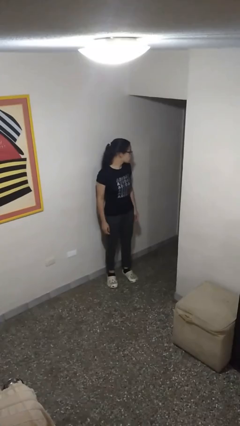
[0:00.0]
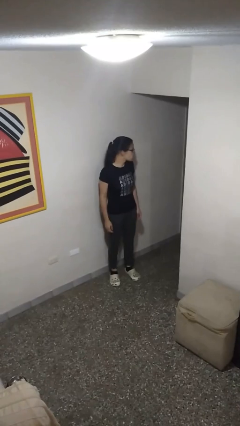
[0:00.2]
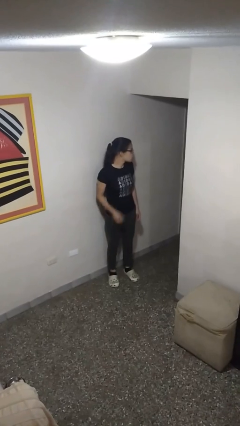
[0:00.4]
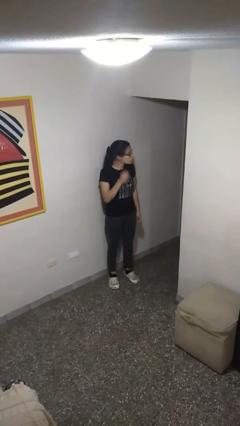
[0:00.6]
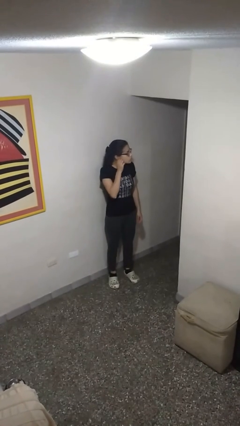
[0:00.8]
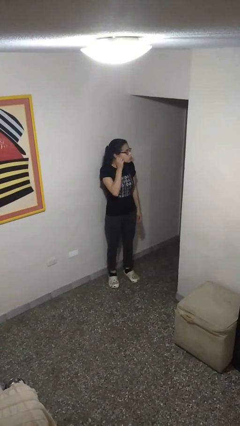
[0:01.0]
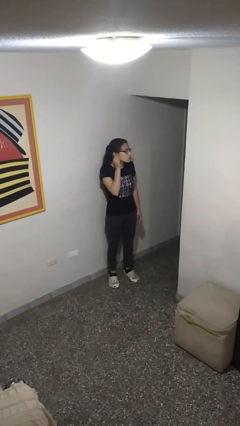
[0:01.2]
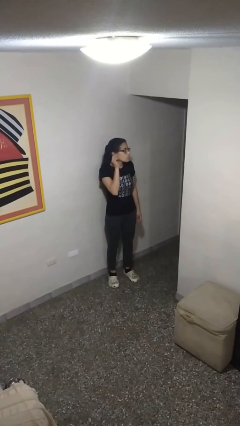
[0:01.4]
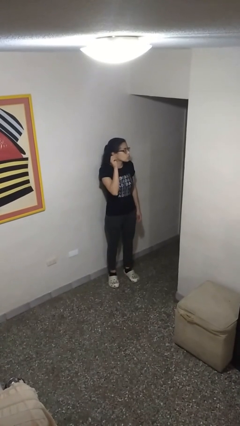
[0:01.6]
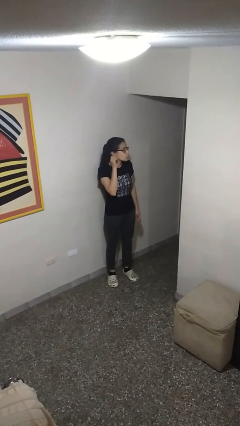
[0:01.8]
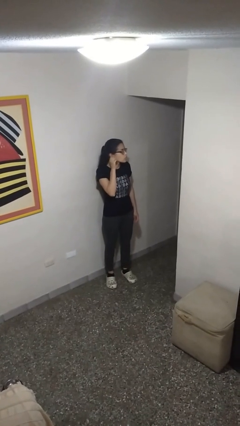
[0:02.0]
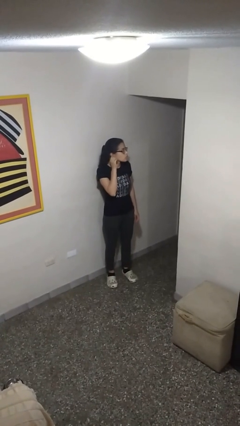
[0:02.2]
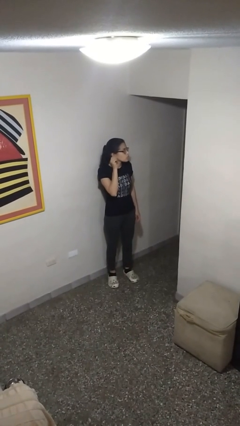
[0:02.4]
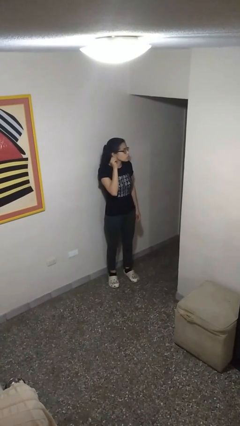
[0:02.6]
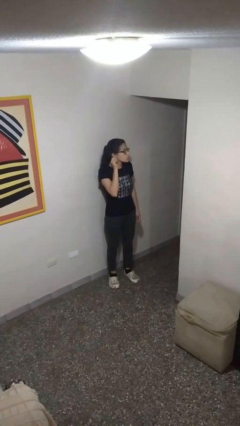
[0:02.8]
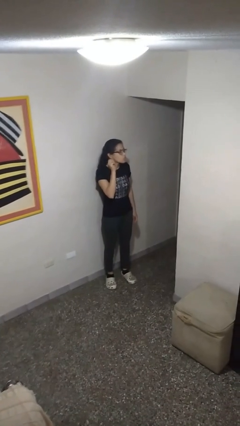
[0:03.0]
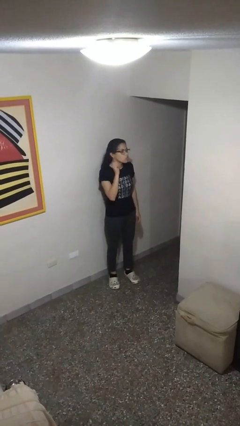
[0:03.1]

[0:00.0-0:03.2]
person touches earlobe

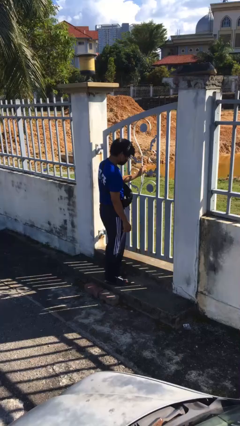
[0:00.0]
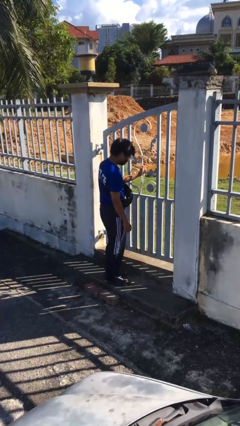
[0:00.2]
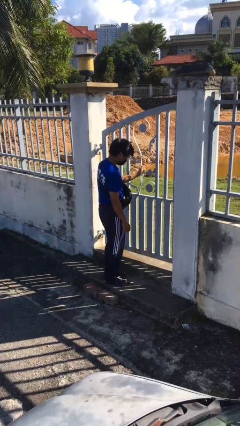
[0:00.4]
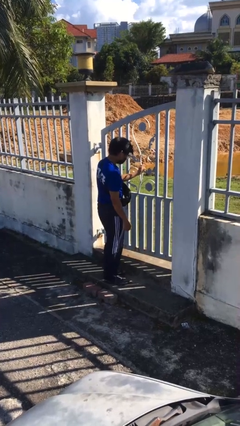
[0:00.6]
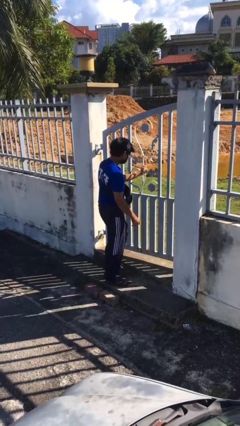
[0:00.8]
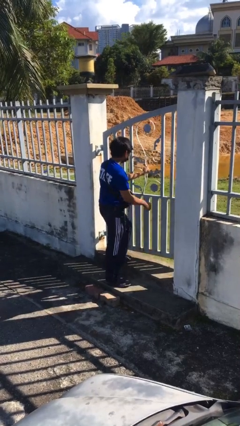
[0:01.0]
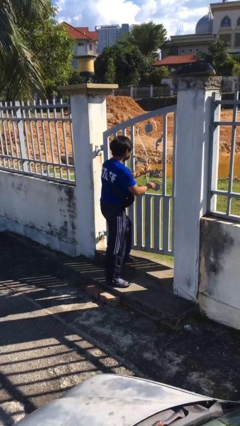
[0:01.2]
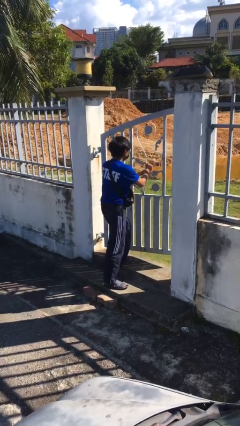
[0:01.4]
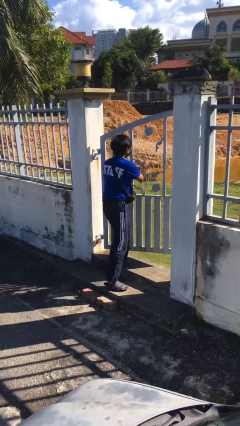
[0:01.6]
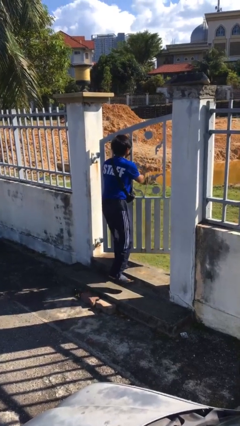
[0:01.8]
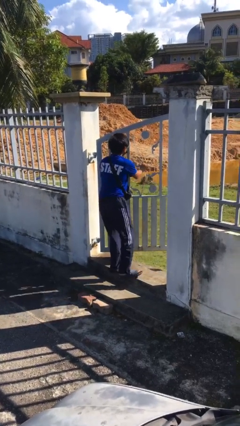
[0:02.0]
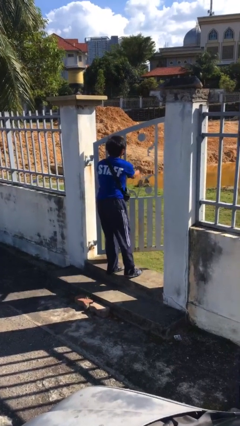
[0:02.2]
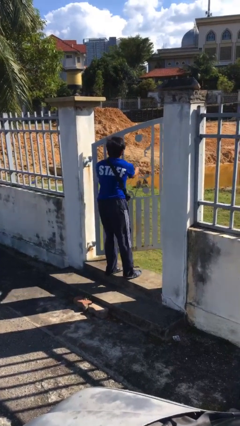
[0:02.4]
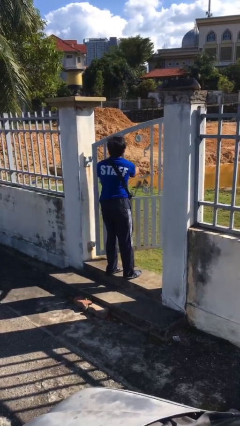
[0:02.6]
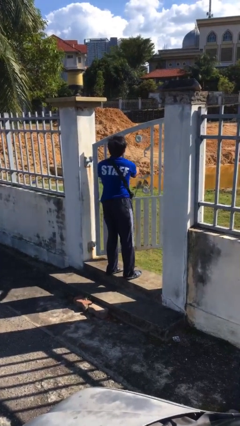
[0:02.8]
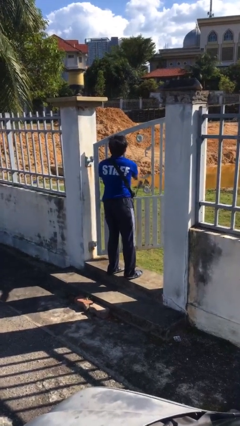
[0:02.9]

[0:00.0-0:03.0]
person opens facility door

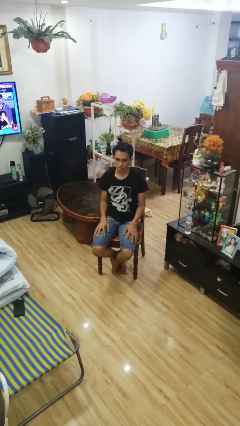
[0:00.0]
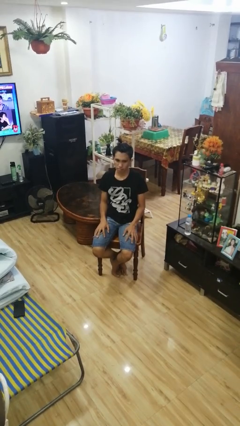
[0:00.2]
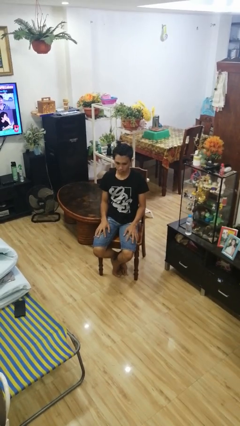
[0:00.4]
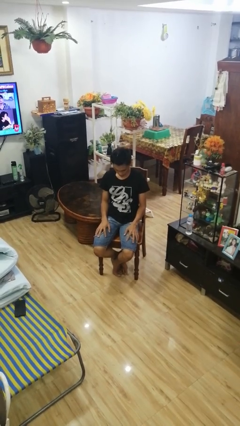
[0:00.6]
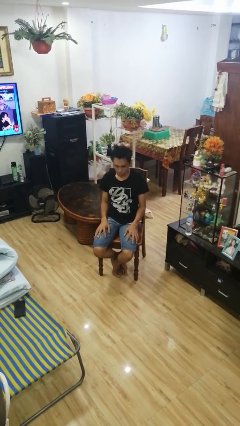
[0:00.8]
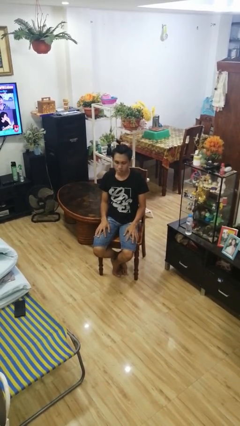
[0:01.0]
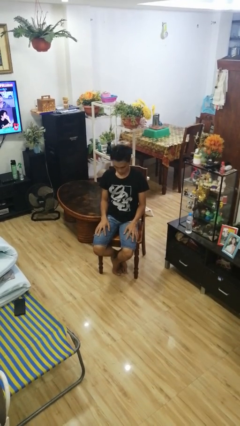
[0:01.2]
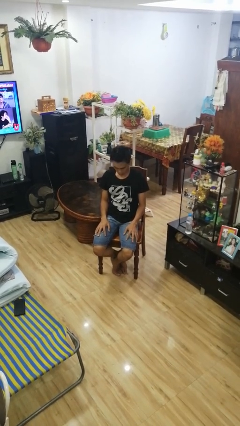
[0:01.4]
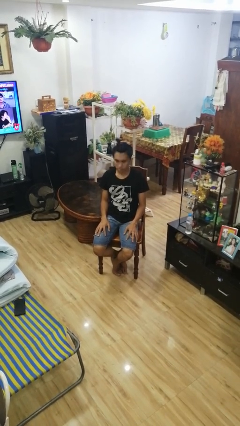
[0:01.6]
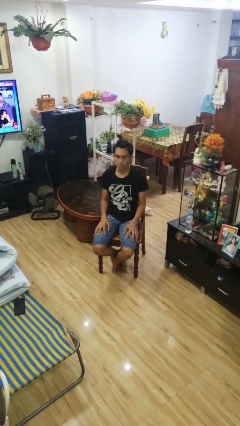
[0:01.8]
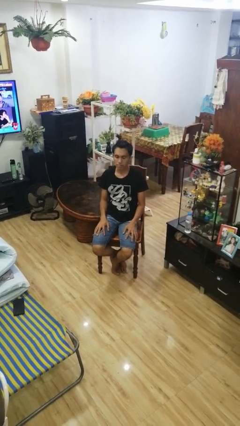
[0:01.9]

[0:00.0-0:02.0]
person nods head

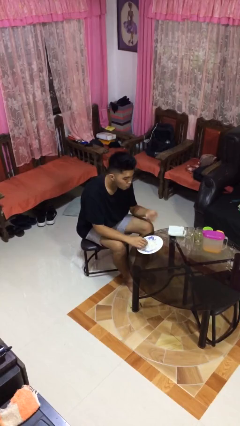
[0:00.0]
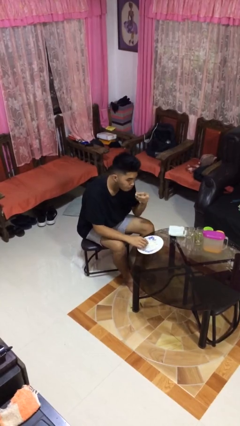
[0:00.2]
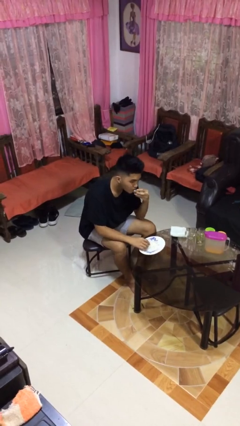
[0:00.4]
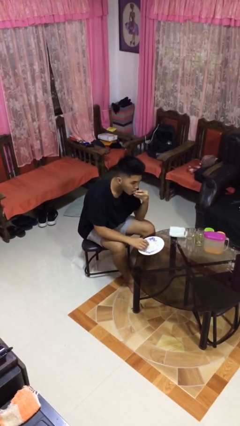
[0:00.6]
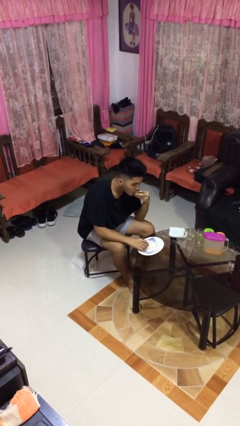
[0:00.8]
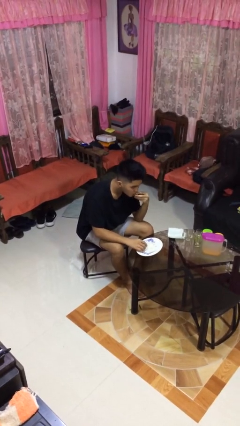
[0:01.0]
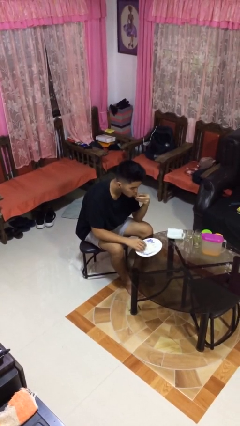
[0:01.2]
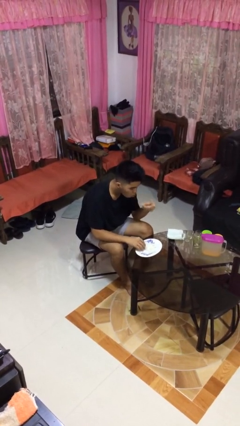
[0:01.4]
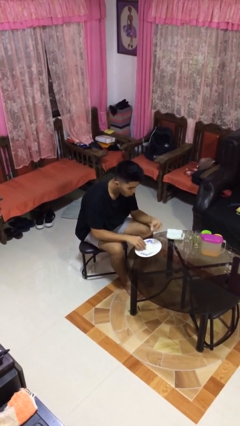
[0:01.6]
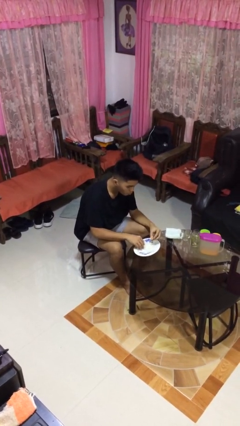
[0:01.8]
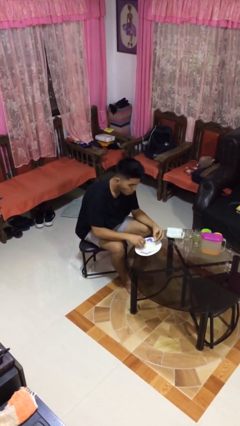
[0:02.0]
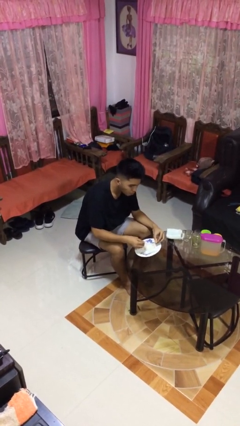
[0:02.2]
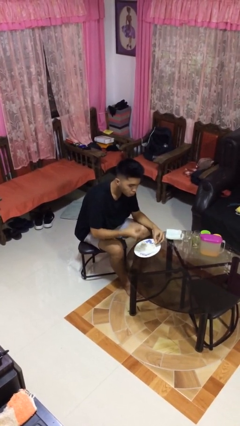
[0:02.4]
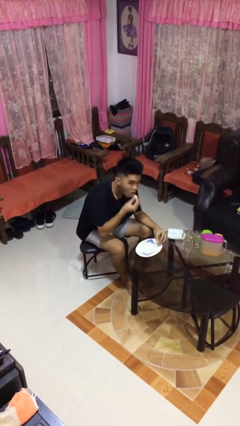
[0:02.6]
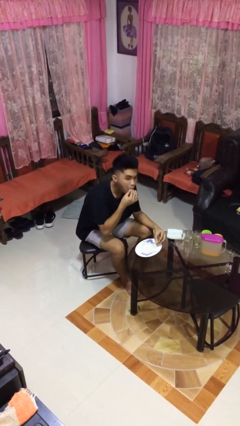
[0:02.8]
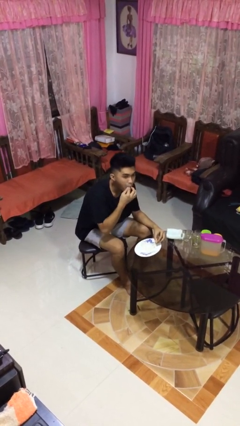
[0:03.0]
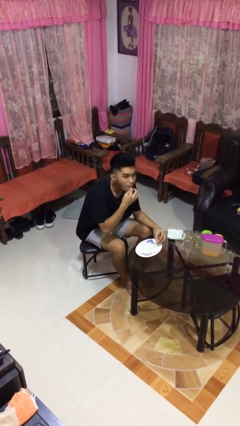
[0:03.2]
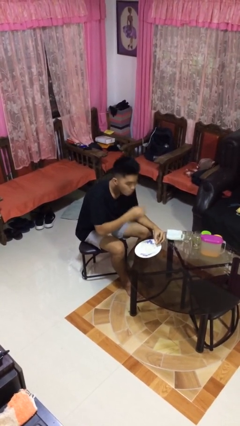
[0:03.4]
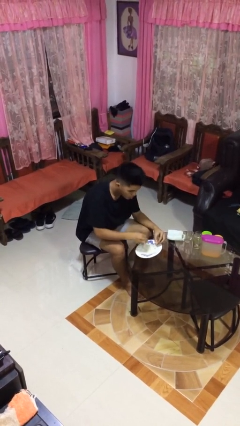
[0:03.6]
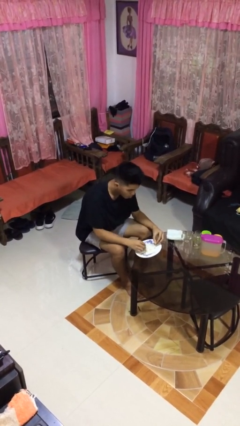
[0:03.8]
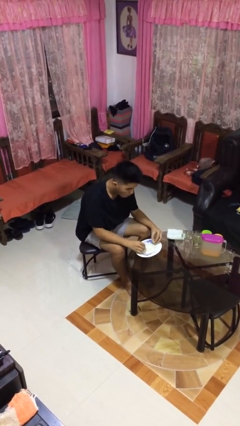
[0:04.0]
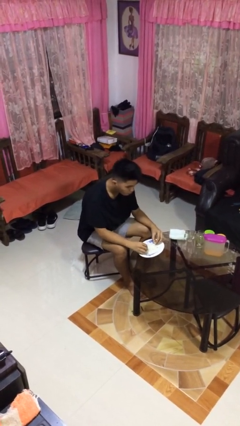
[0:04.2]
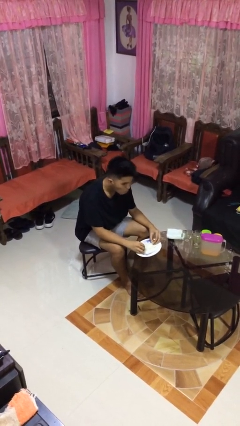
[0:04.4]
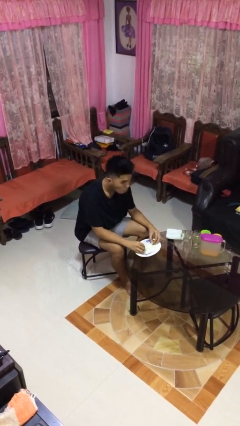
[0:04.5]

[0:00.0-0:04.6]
person eats with hands

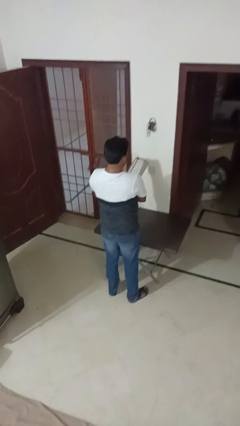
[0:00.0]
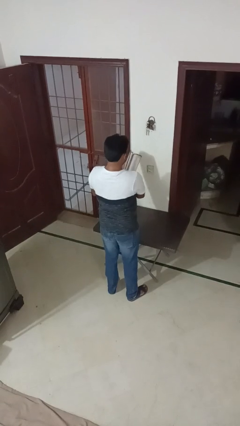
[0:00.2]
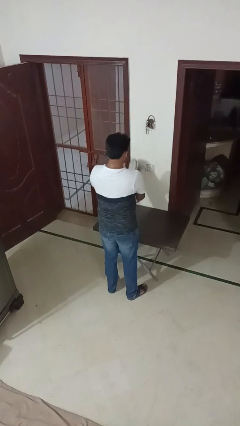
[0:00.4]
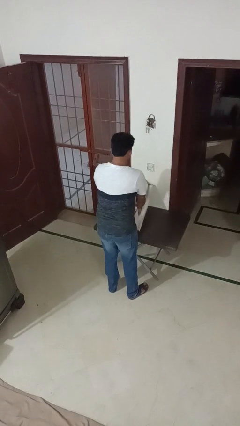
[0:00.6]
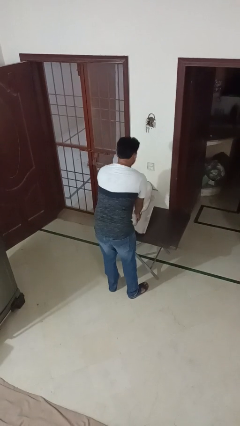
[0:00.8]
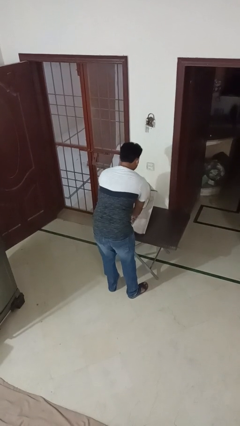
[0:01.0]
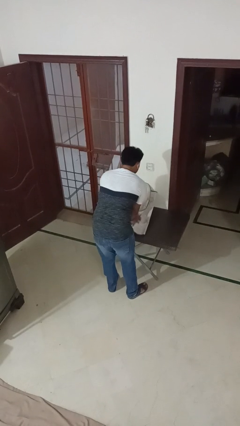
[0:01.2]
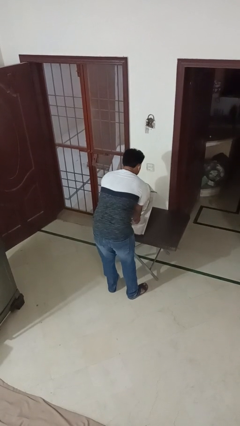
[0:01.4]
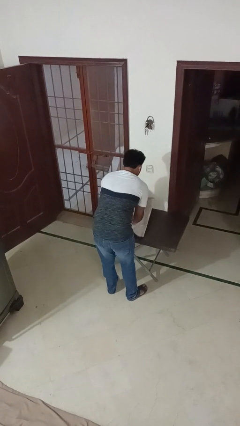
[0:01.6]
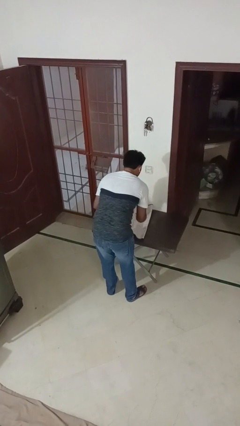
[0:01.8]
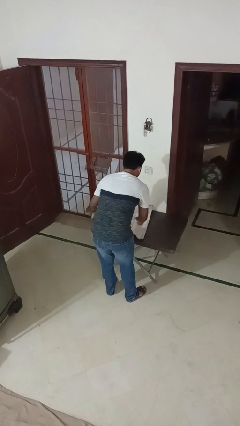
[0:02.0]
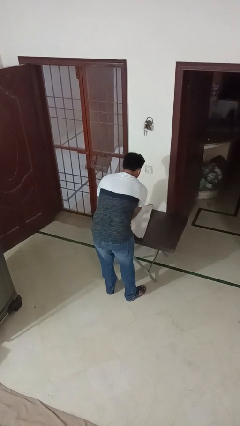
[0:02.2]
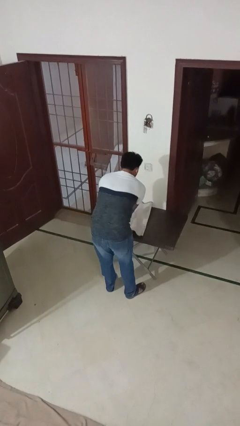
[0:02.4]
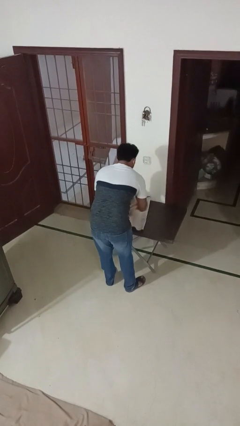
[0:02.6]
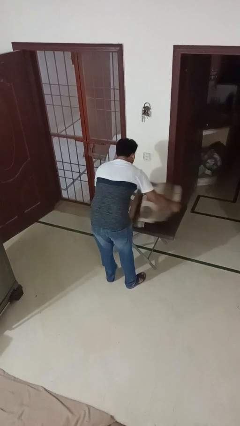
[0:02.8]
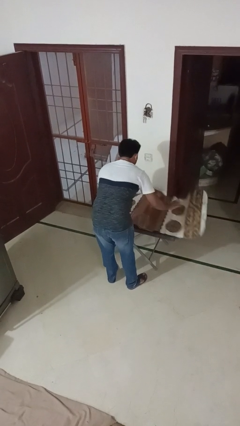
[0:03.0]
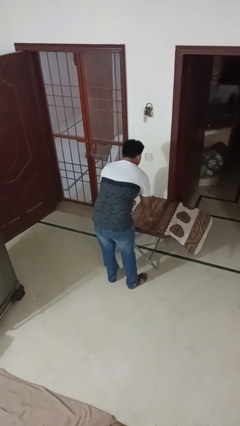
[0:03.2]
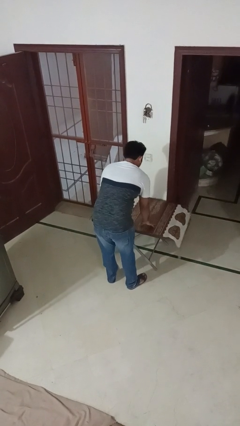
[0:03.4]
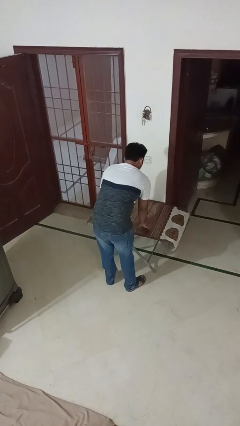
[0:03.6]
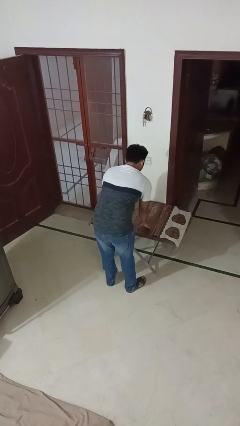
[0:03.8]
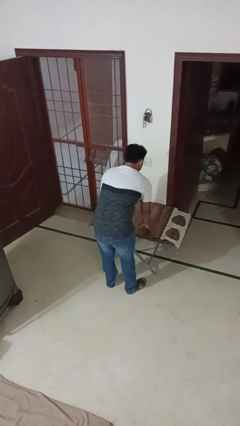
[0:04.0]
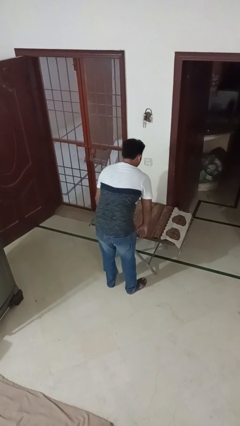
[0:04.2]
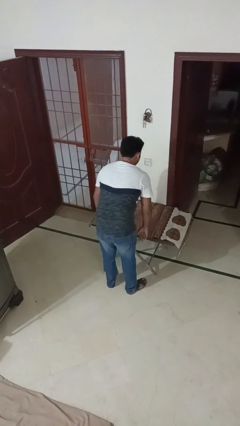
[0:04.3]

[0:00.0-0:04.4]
person spreads tablecloth

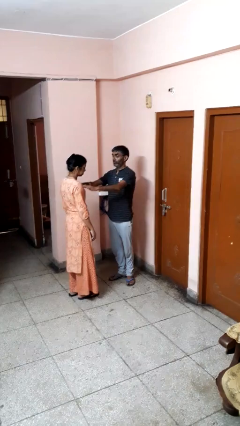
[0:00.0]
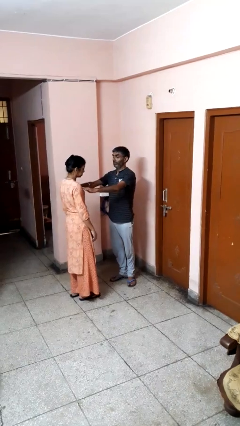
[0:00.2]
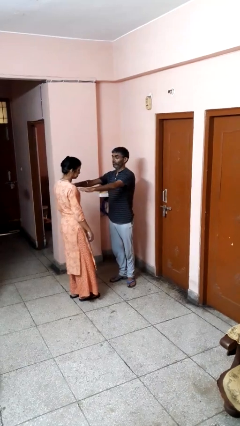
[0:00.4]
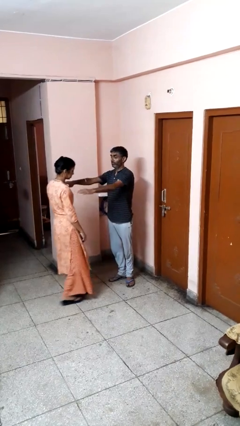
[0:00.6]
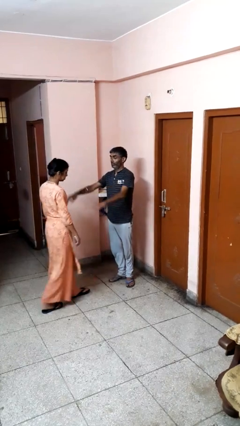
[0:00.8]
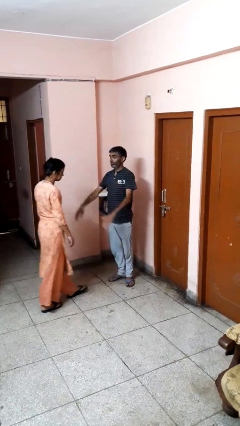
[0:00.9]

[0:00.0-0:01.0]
person shoves person
